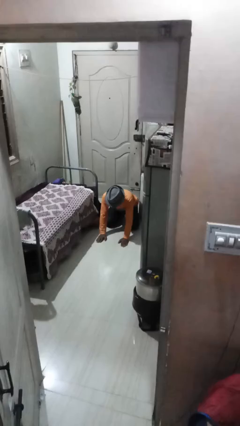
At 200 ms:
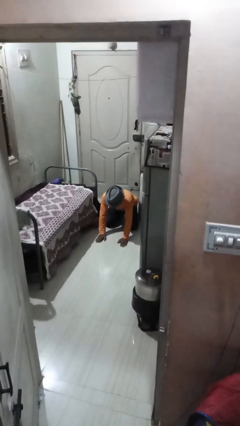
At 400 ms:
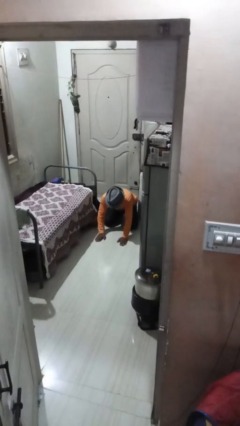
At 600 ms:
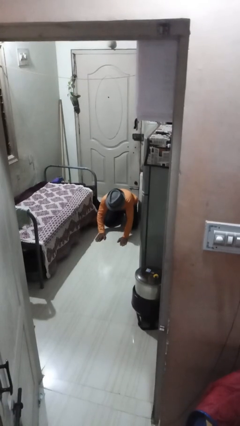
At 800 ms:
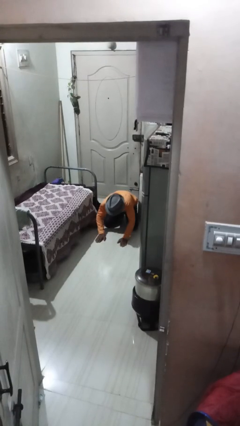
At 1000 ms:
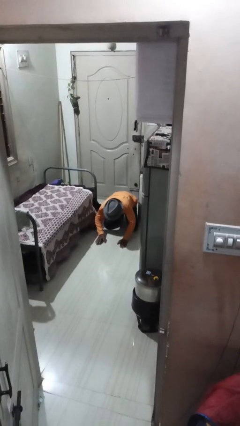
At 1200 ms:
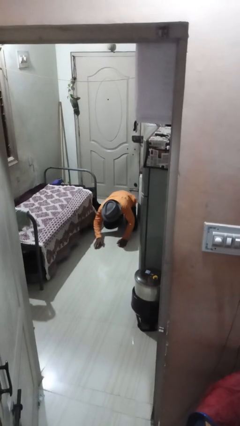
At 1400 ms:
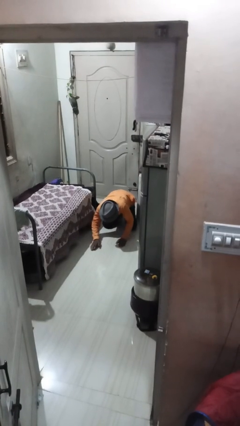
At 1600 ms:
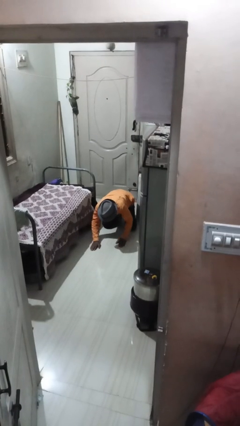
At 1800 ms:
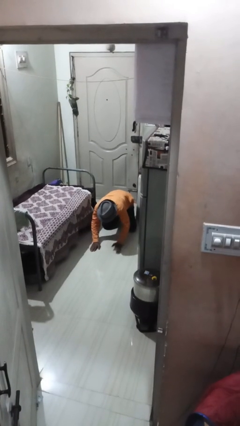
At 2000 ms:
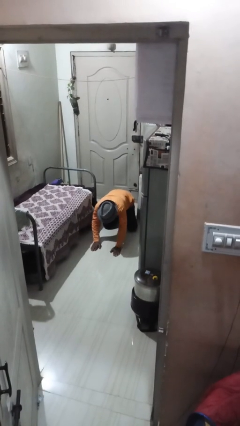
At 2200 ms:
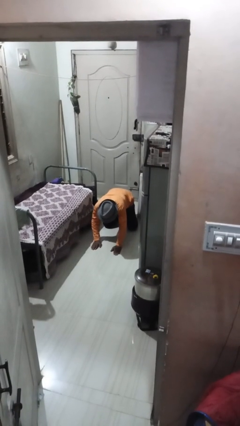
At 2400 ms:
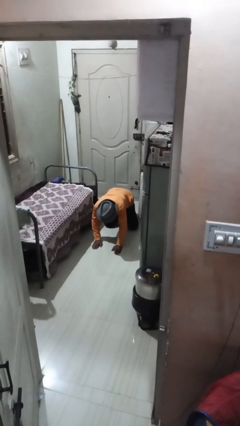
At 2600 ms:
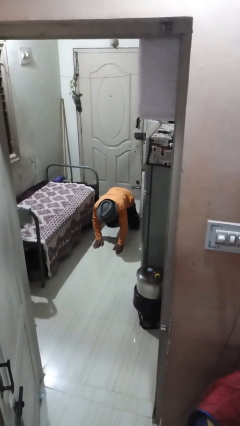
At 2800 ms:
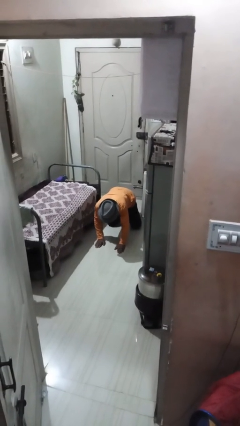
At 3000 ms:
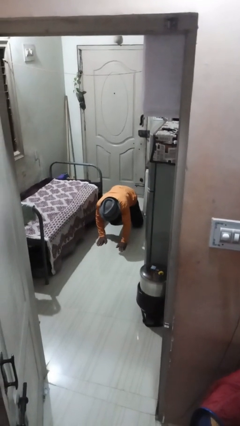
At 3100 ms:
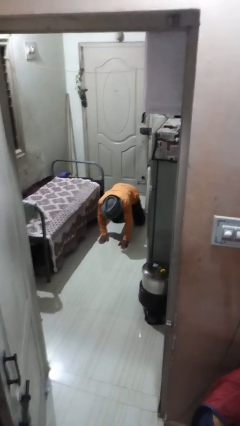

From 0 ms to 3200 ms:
person crawls

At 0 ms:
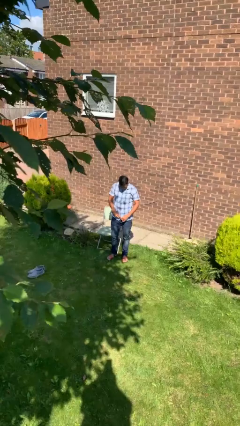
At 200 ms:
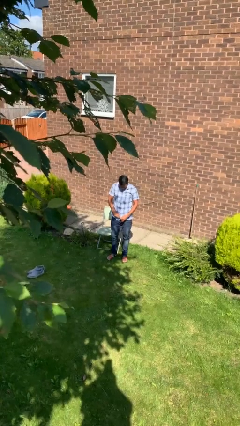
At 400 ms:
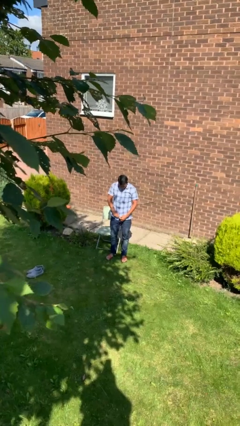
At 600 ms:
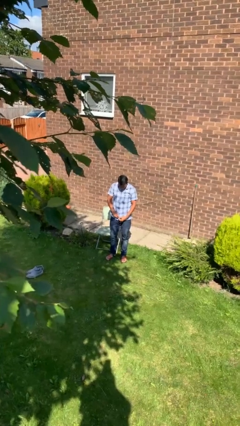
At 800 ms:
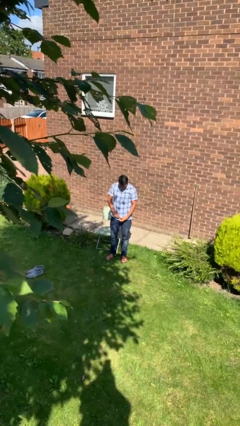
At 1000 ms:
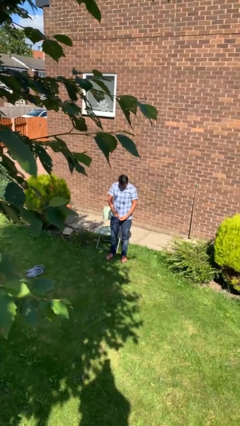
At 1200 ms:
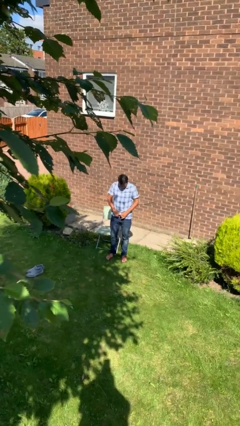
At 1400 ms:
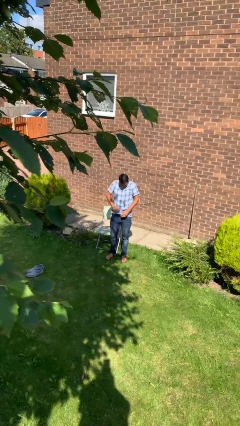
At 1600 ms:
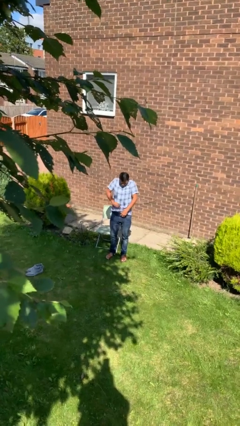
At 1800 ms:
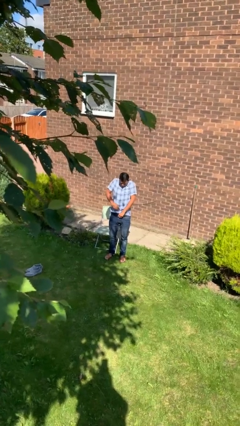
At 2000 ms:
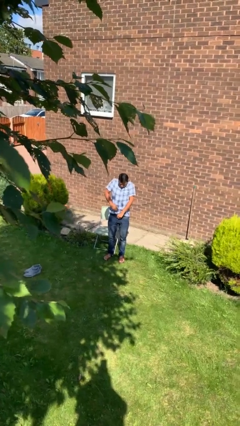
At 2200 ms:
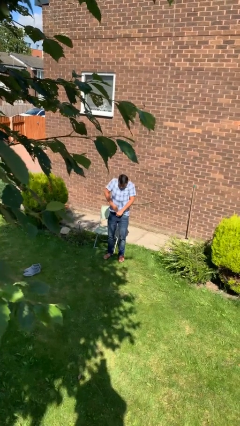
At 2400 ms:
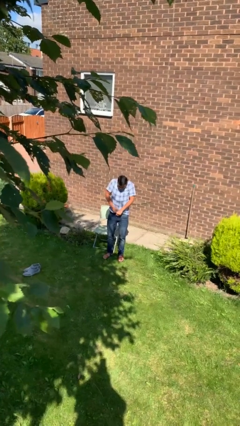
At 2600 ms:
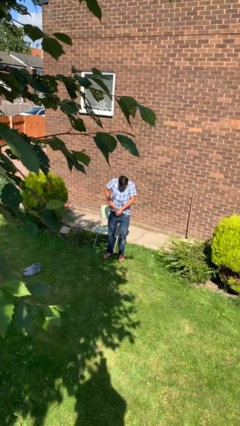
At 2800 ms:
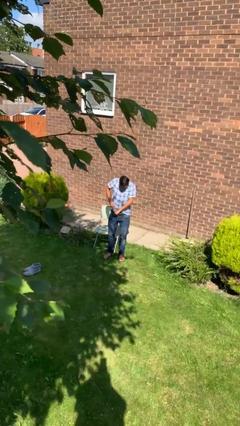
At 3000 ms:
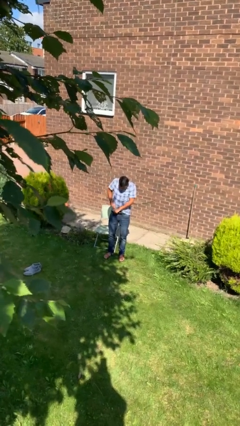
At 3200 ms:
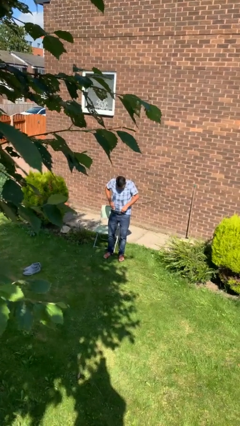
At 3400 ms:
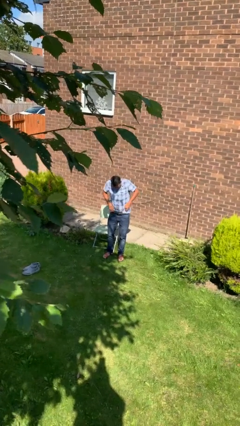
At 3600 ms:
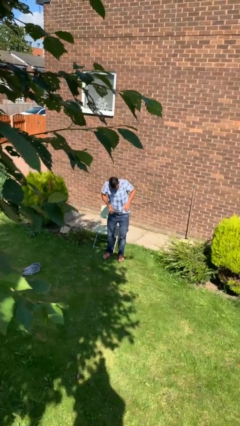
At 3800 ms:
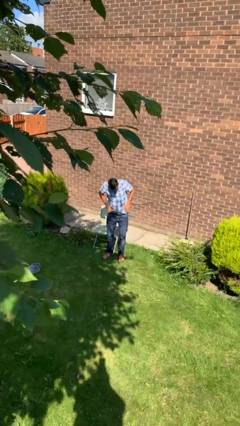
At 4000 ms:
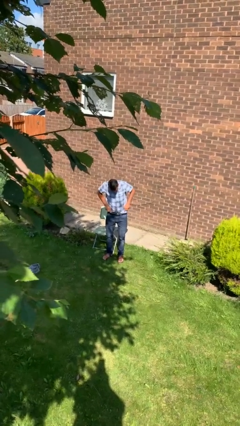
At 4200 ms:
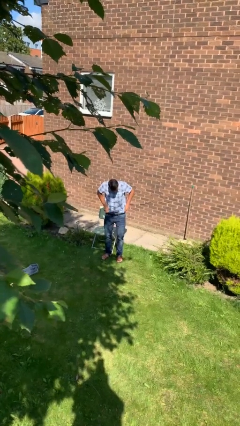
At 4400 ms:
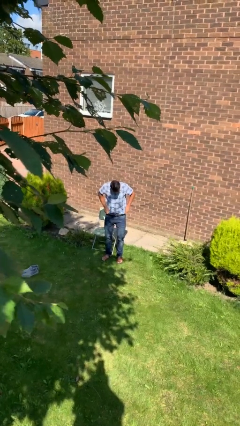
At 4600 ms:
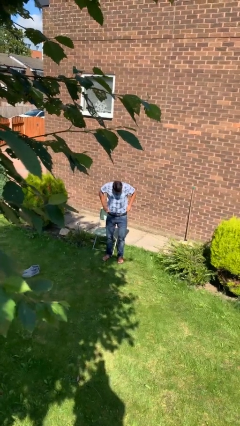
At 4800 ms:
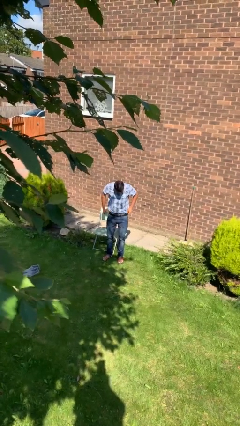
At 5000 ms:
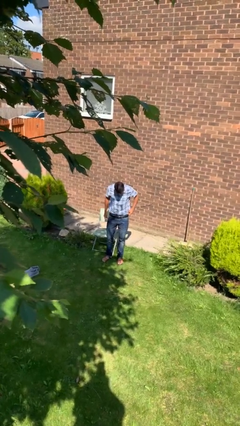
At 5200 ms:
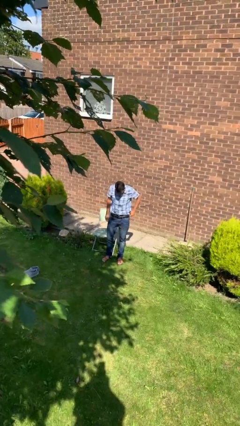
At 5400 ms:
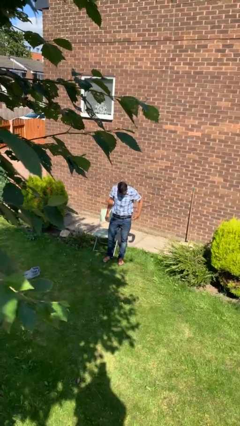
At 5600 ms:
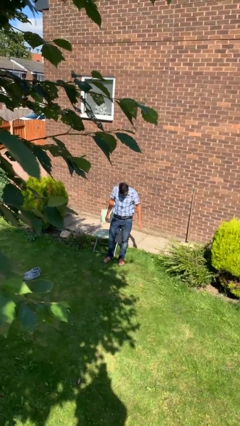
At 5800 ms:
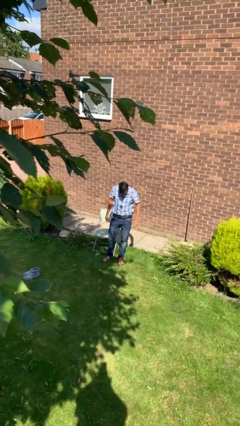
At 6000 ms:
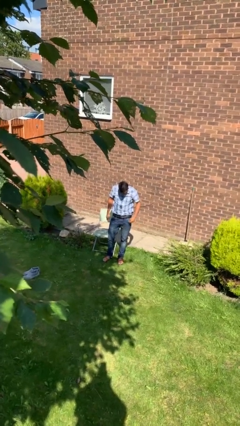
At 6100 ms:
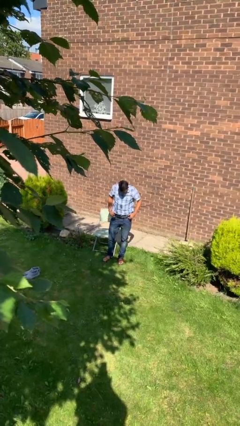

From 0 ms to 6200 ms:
person tucks in shirt

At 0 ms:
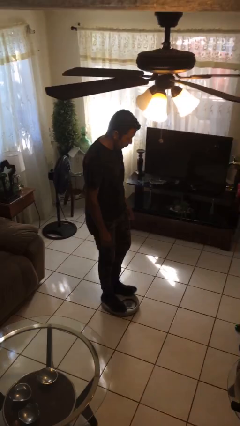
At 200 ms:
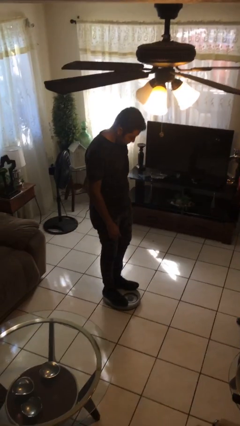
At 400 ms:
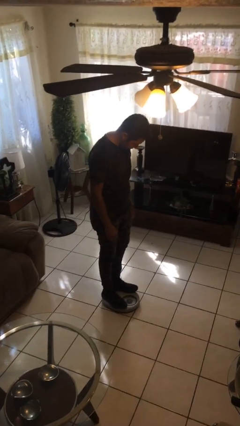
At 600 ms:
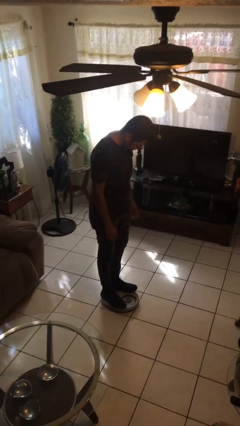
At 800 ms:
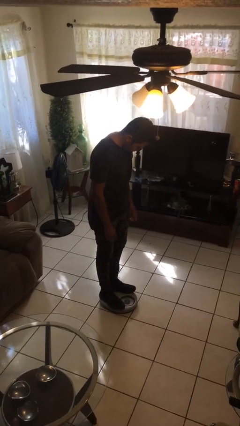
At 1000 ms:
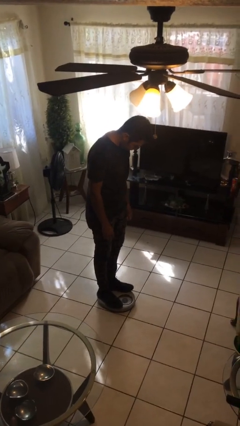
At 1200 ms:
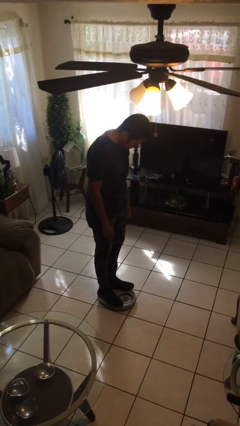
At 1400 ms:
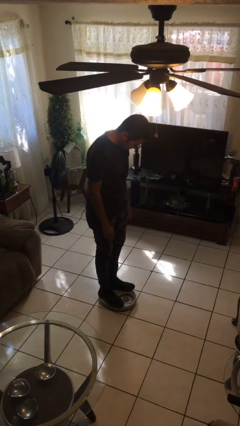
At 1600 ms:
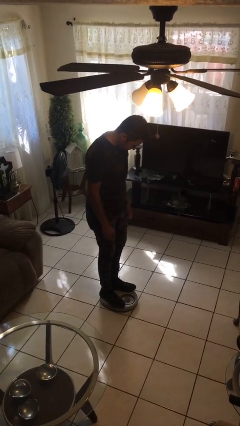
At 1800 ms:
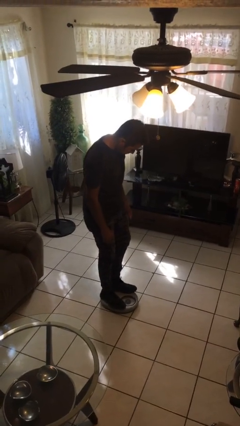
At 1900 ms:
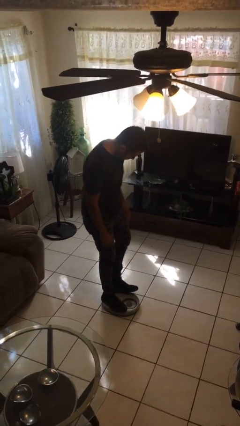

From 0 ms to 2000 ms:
person uses bodyweight scale

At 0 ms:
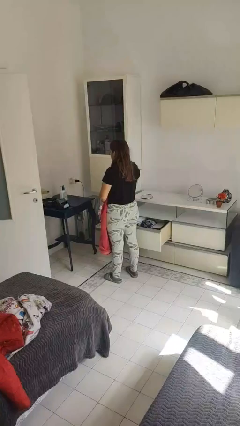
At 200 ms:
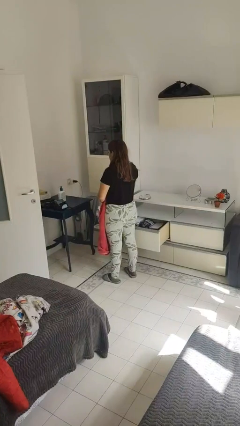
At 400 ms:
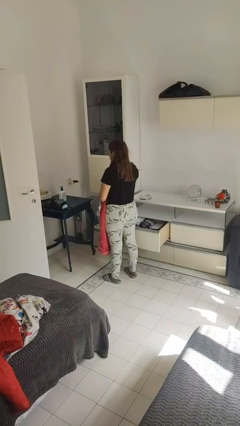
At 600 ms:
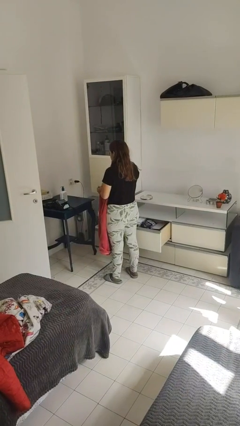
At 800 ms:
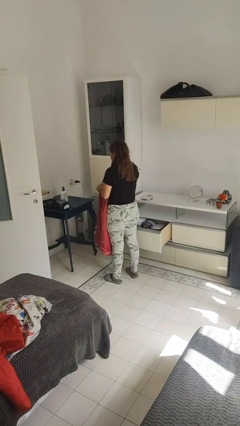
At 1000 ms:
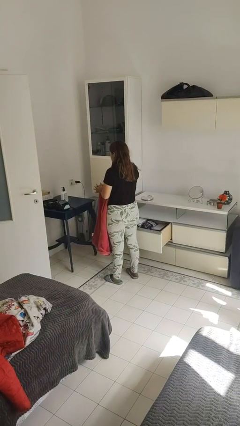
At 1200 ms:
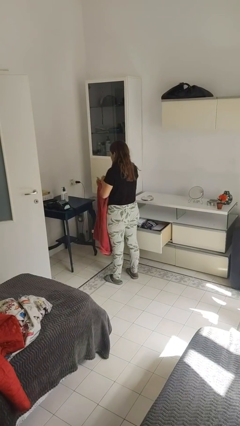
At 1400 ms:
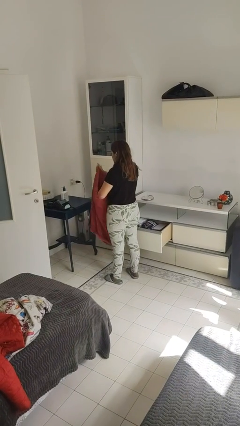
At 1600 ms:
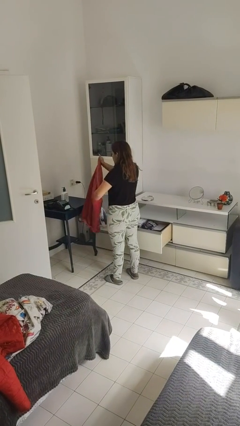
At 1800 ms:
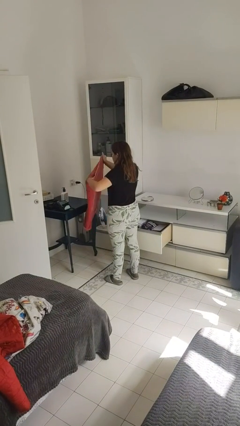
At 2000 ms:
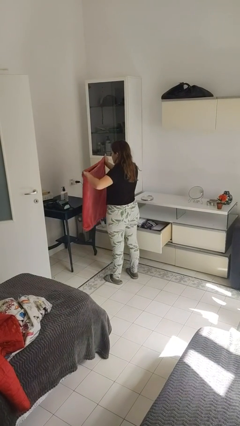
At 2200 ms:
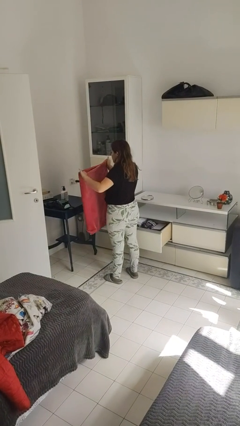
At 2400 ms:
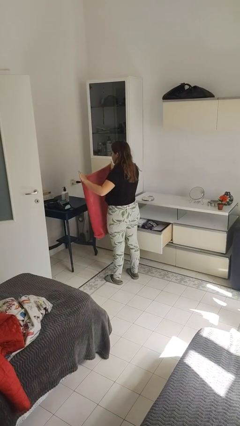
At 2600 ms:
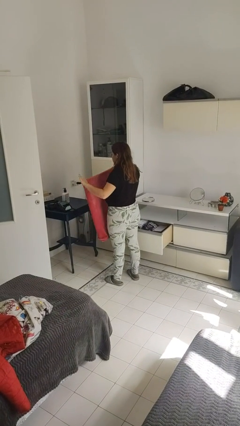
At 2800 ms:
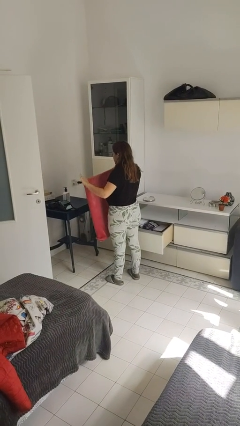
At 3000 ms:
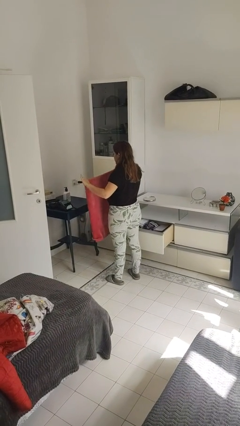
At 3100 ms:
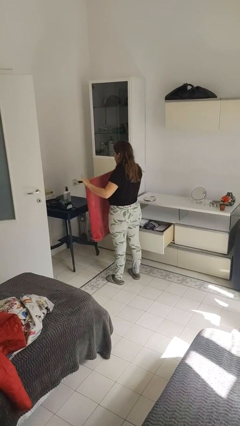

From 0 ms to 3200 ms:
person folds blanket

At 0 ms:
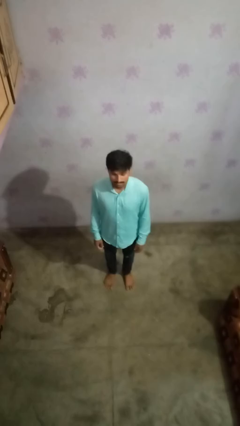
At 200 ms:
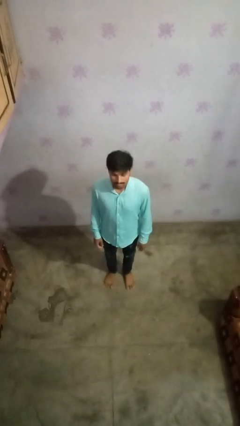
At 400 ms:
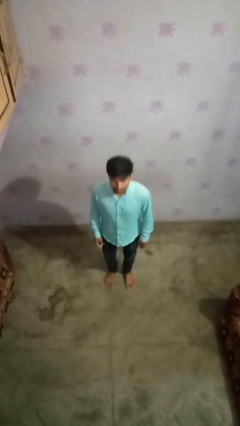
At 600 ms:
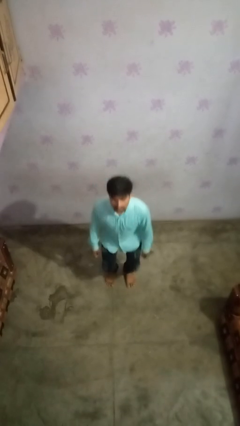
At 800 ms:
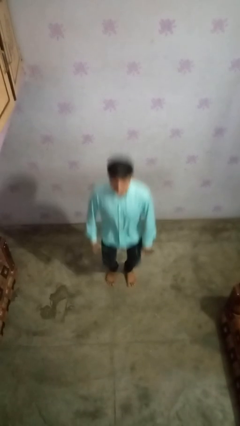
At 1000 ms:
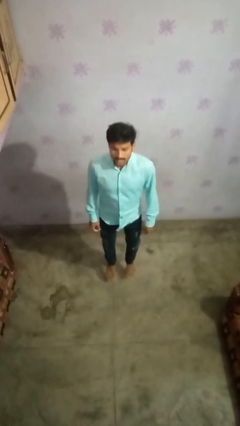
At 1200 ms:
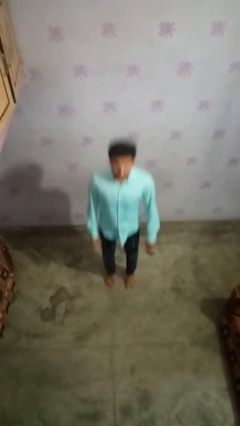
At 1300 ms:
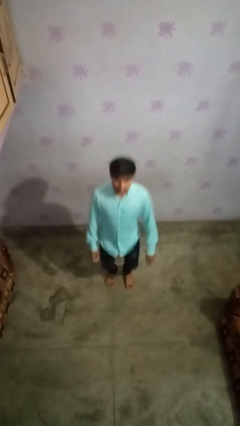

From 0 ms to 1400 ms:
person jumps

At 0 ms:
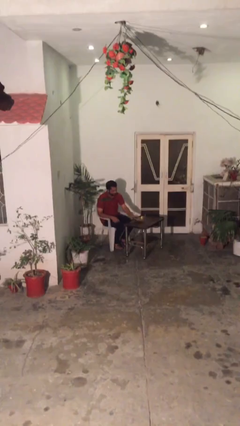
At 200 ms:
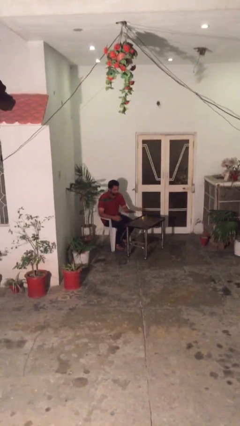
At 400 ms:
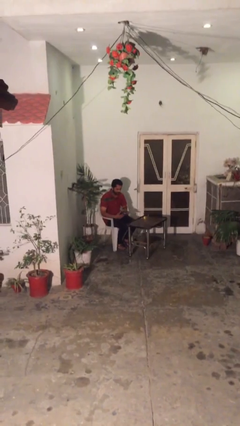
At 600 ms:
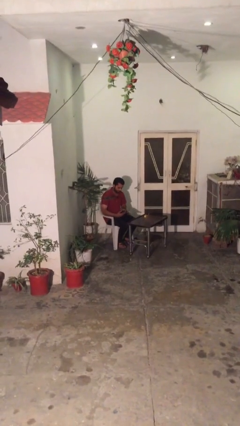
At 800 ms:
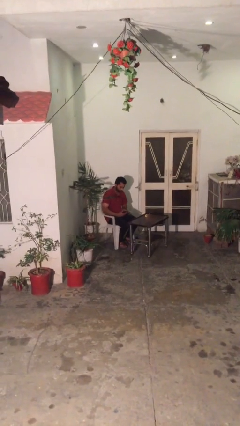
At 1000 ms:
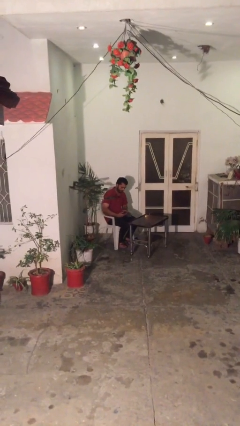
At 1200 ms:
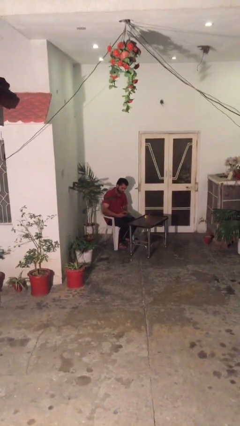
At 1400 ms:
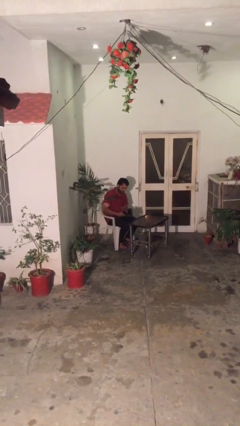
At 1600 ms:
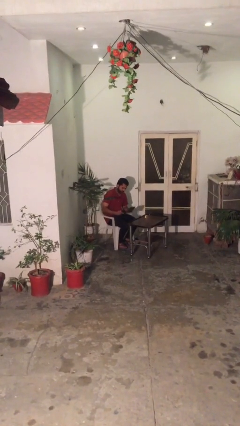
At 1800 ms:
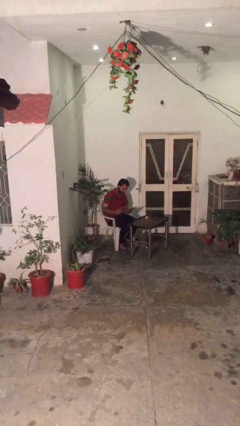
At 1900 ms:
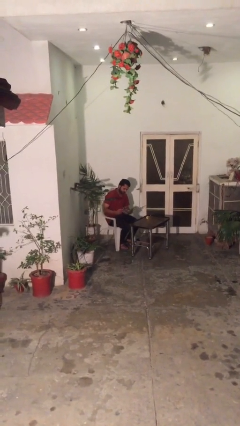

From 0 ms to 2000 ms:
person picks up object from table
